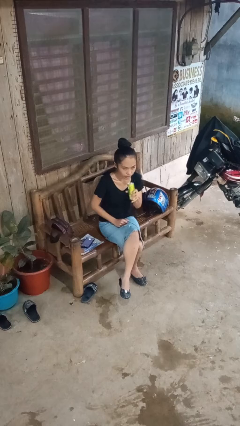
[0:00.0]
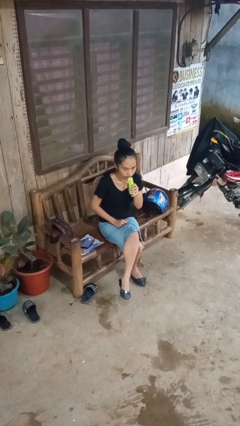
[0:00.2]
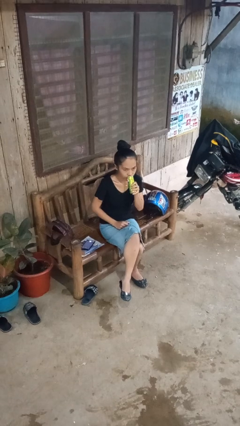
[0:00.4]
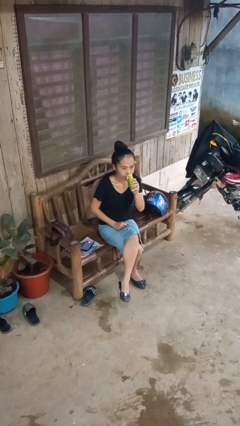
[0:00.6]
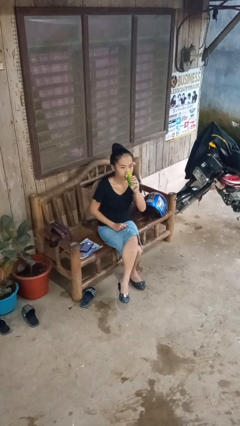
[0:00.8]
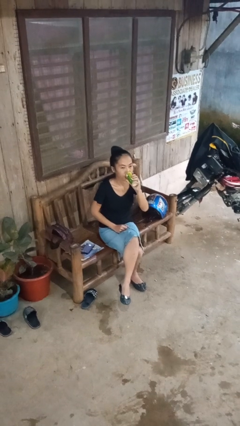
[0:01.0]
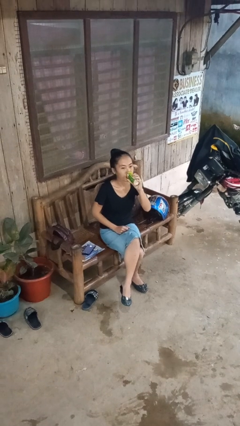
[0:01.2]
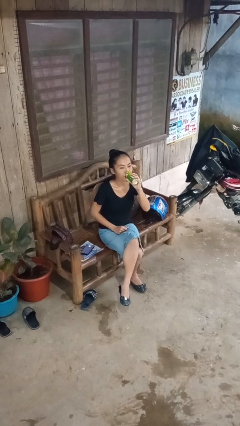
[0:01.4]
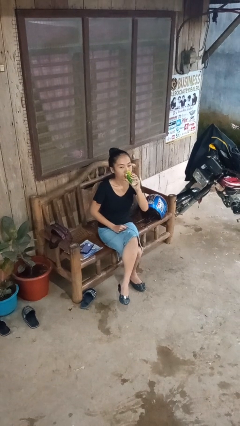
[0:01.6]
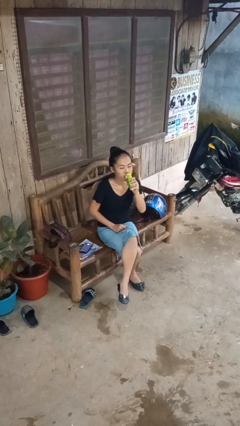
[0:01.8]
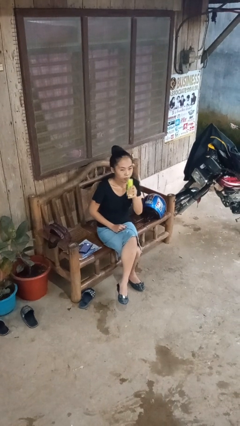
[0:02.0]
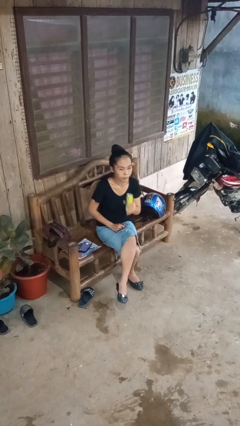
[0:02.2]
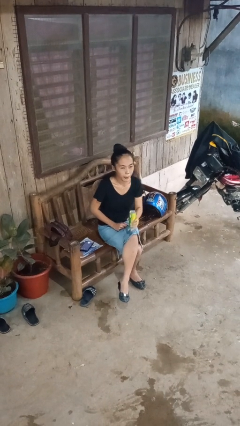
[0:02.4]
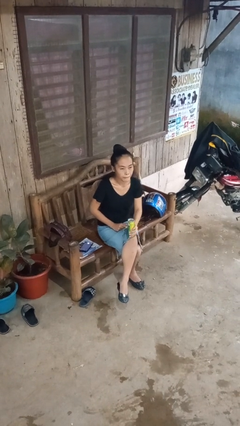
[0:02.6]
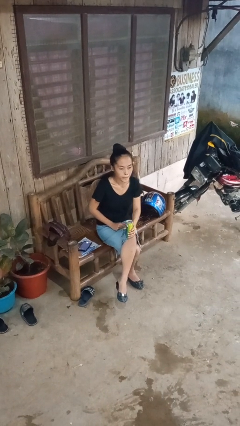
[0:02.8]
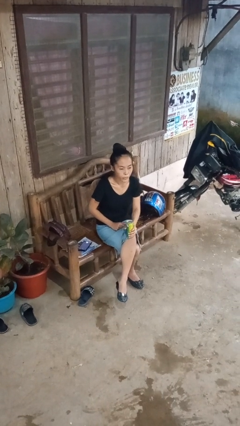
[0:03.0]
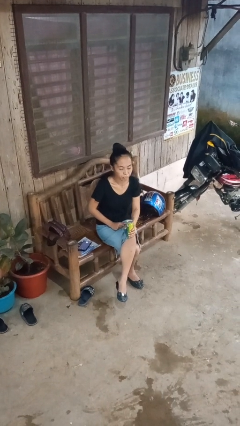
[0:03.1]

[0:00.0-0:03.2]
person drinks from beverage can

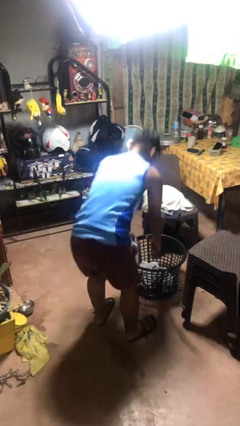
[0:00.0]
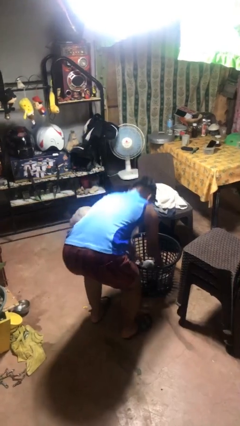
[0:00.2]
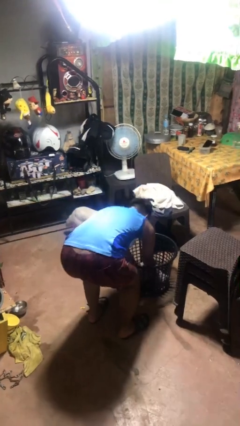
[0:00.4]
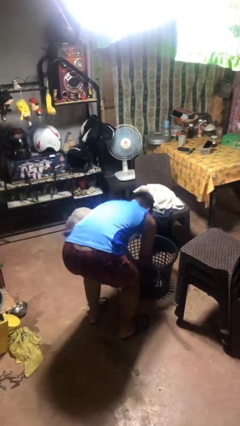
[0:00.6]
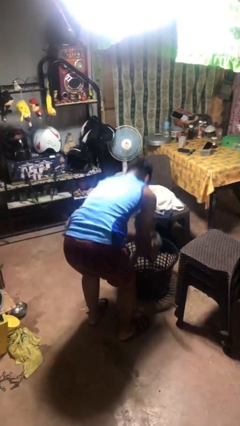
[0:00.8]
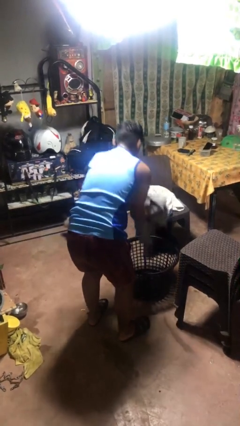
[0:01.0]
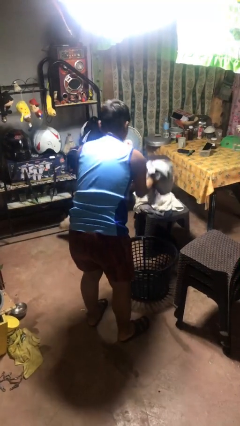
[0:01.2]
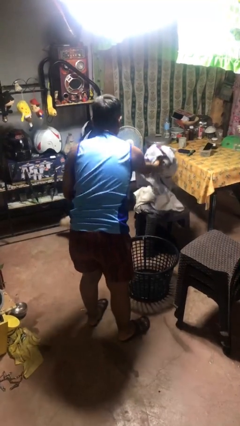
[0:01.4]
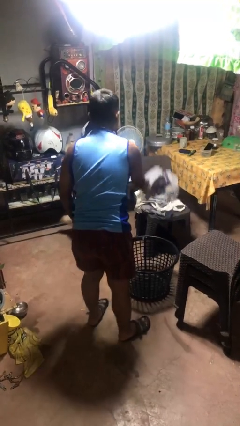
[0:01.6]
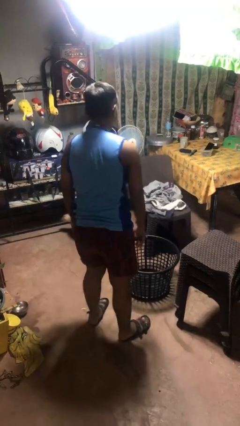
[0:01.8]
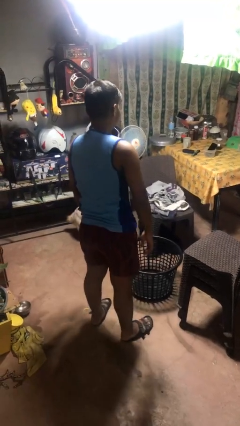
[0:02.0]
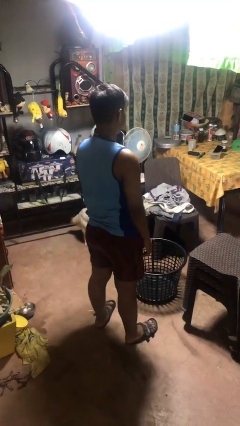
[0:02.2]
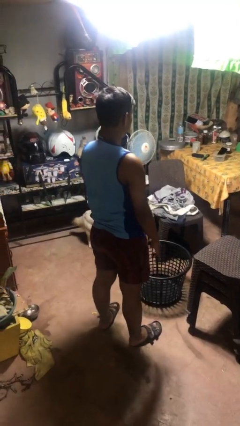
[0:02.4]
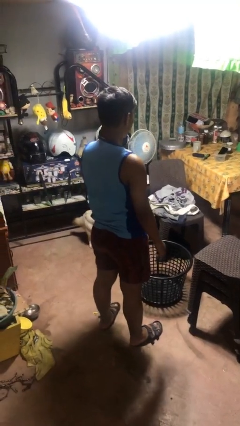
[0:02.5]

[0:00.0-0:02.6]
person takes object from basket

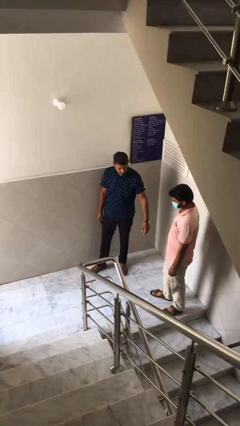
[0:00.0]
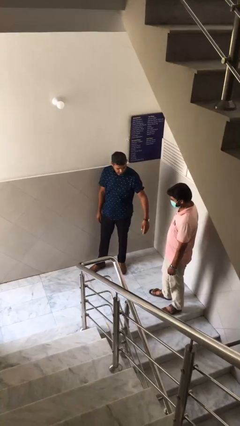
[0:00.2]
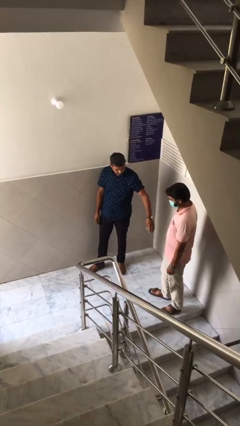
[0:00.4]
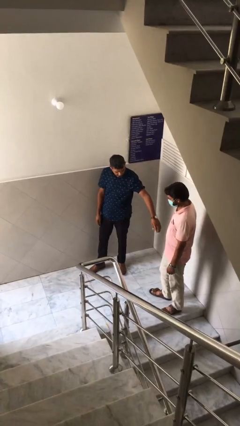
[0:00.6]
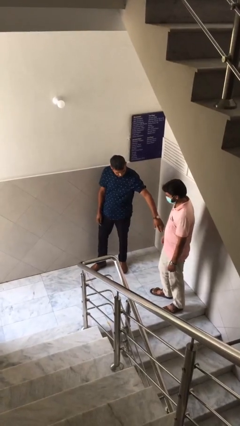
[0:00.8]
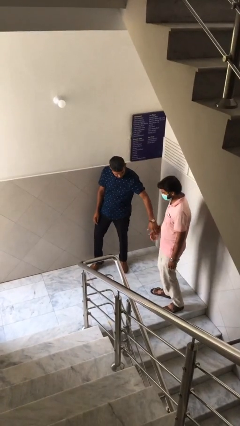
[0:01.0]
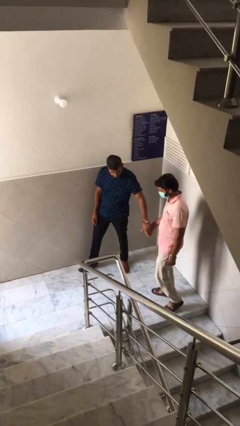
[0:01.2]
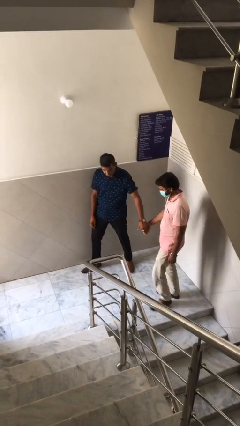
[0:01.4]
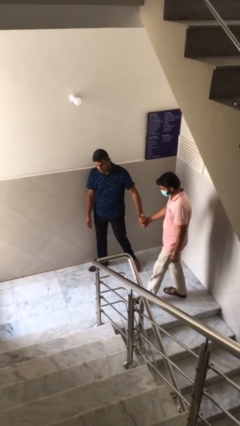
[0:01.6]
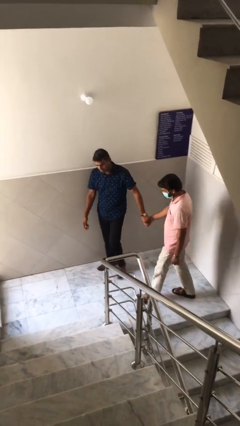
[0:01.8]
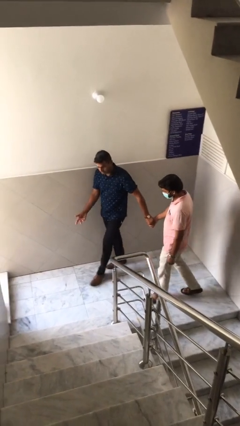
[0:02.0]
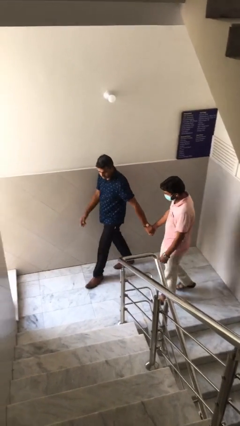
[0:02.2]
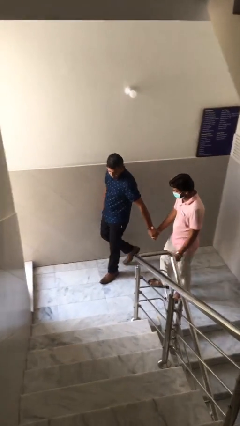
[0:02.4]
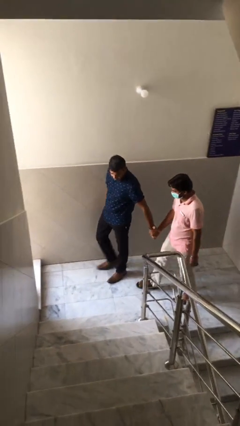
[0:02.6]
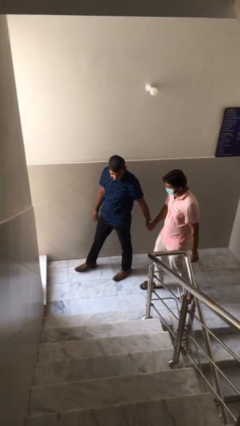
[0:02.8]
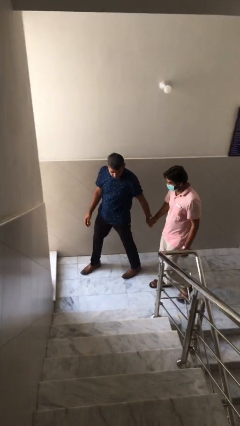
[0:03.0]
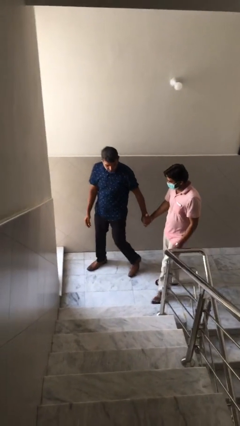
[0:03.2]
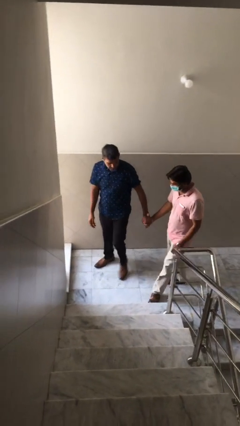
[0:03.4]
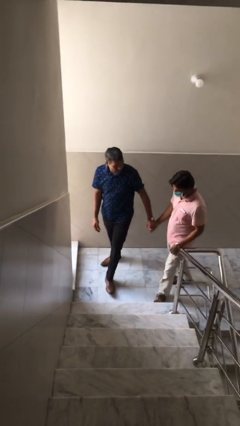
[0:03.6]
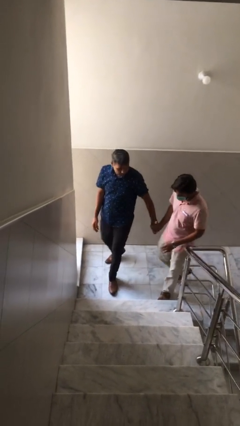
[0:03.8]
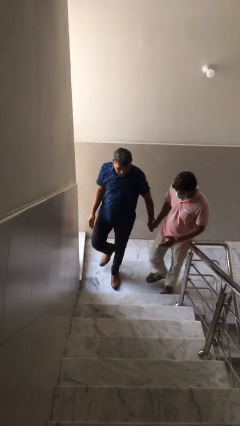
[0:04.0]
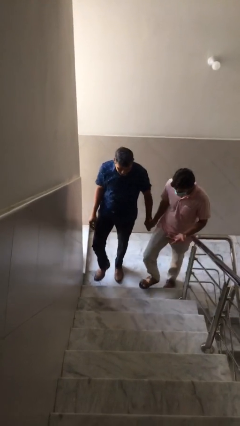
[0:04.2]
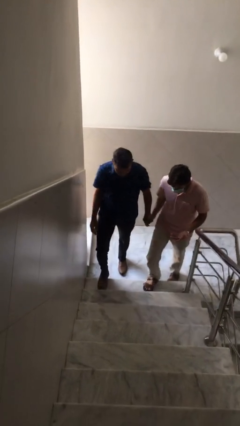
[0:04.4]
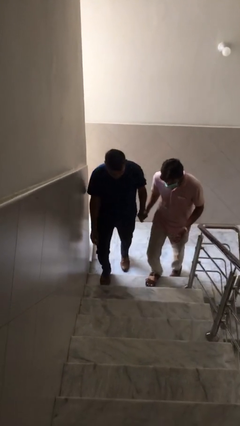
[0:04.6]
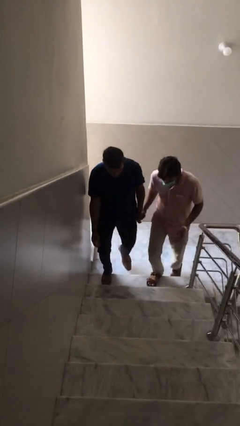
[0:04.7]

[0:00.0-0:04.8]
person holds hand

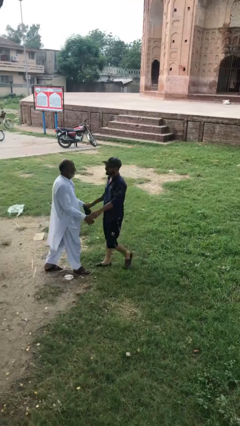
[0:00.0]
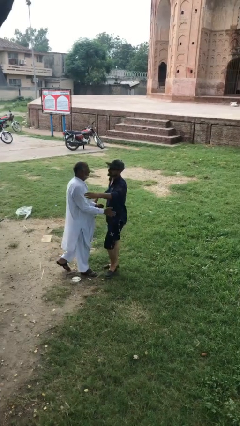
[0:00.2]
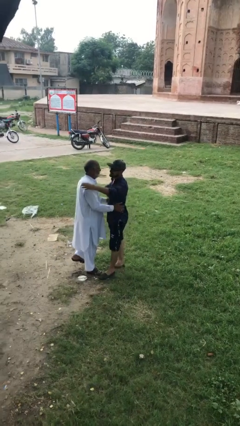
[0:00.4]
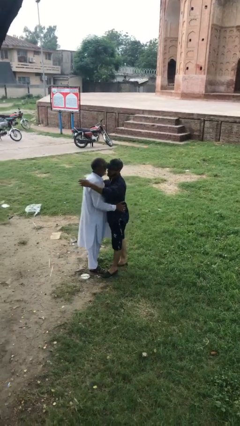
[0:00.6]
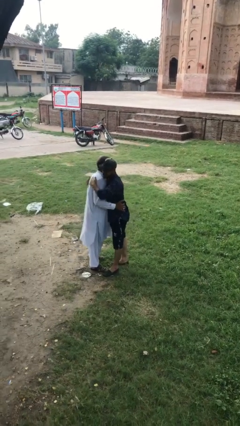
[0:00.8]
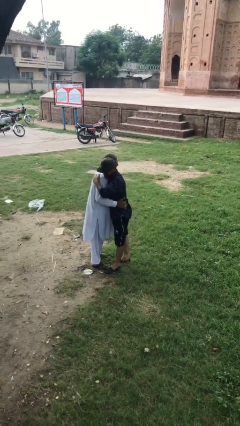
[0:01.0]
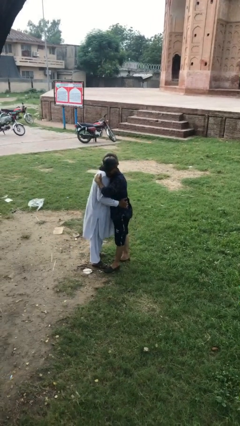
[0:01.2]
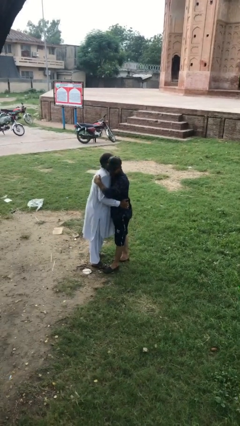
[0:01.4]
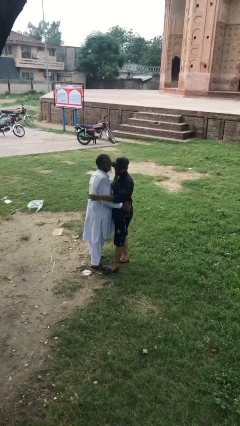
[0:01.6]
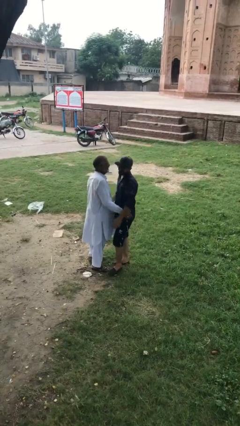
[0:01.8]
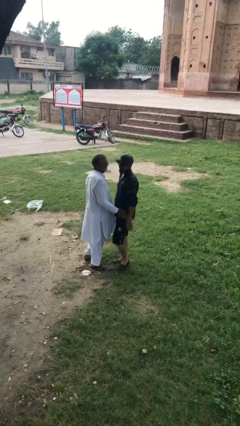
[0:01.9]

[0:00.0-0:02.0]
person embraces person

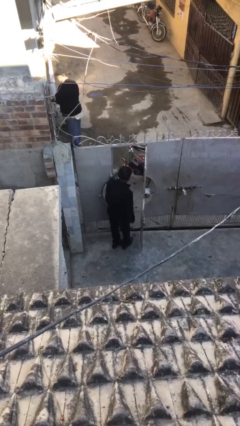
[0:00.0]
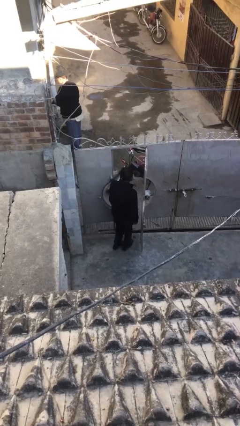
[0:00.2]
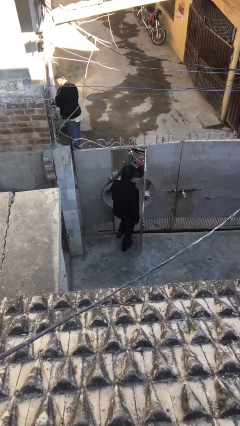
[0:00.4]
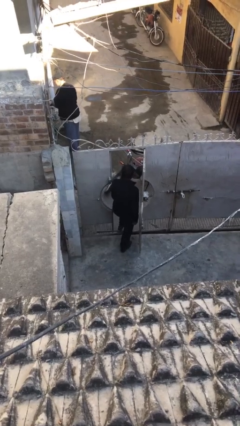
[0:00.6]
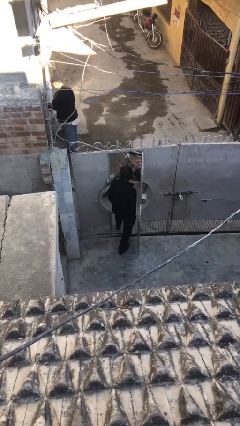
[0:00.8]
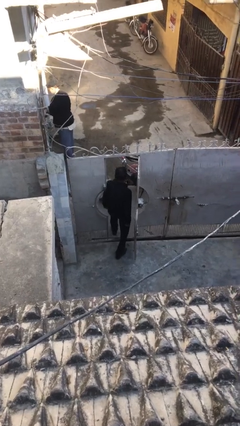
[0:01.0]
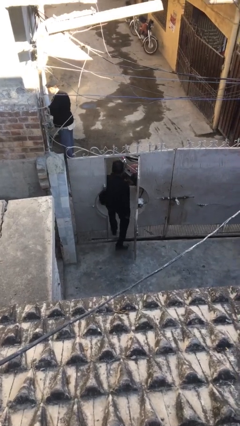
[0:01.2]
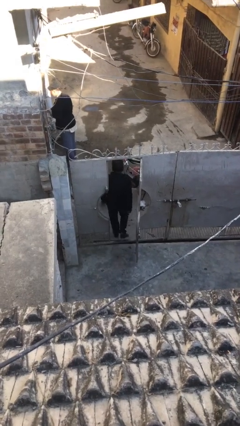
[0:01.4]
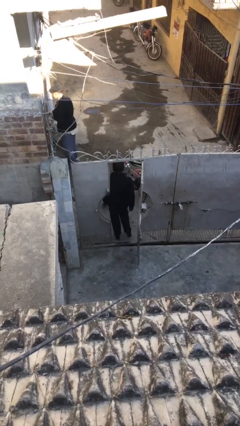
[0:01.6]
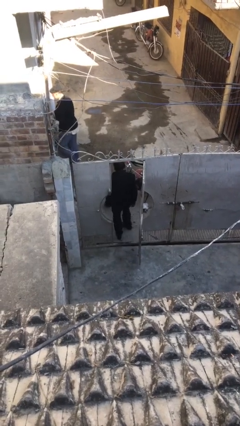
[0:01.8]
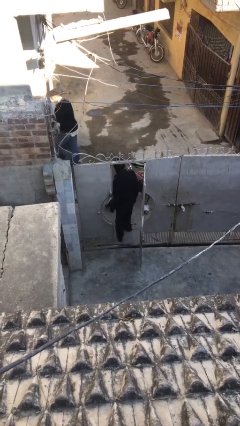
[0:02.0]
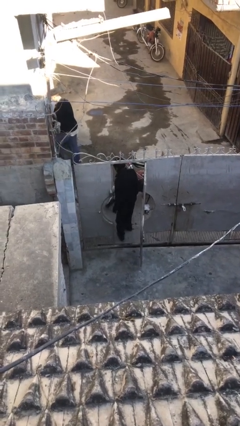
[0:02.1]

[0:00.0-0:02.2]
person exits scene through structure

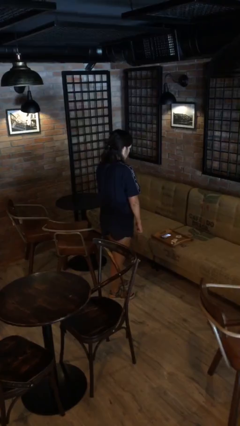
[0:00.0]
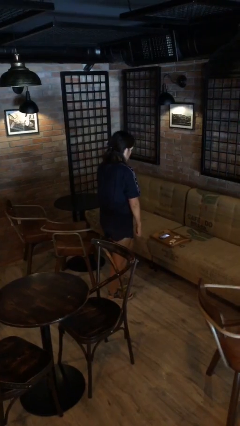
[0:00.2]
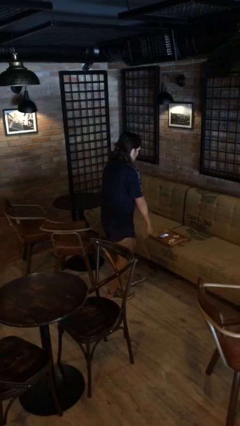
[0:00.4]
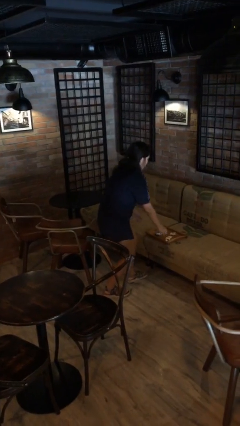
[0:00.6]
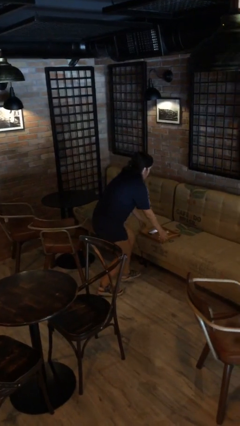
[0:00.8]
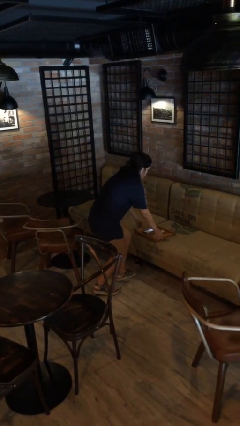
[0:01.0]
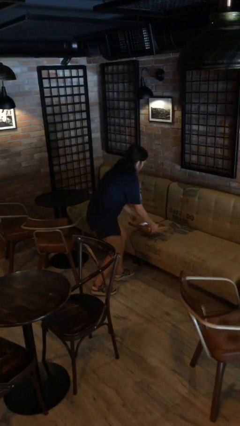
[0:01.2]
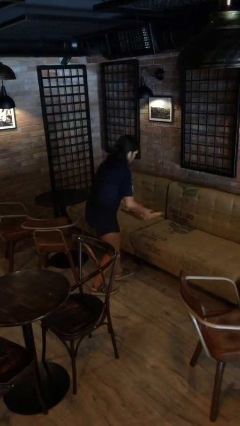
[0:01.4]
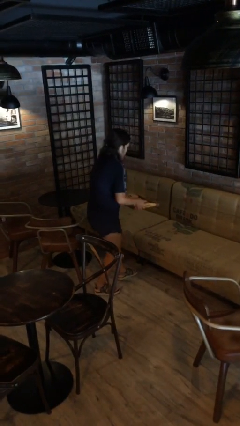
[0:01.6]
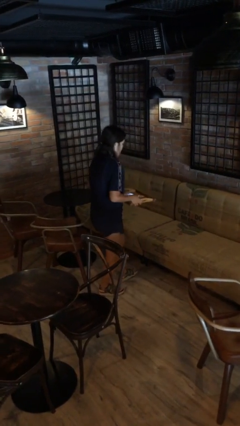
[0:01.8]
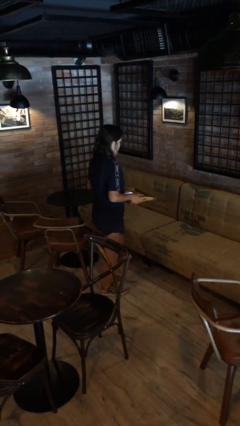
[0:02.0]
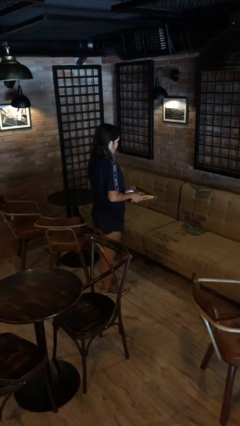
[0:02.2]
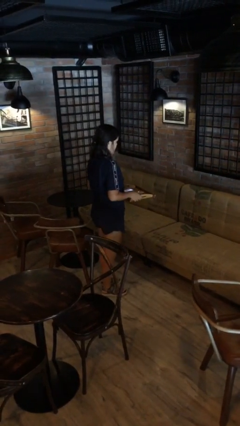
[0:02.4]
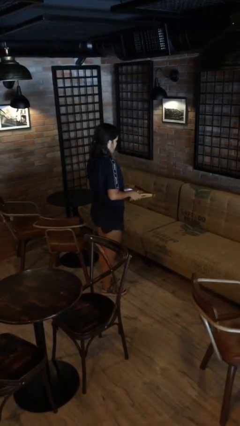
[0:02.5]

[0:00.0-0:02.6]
person picks up object from couch
